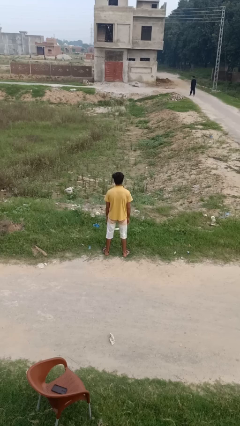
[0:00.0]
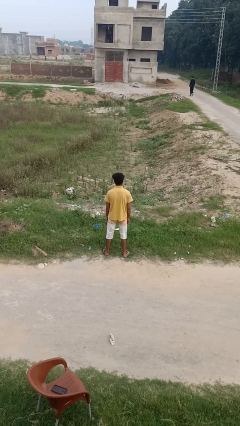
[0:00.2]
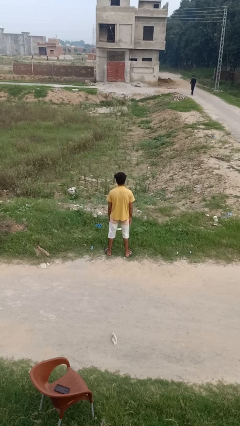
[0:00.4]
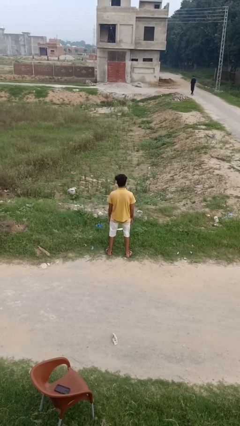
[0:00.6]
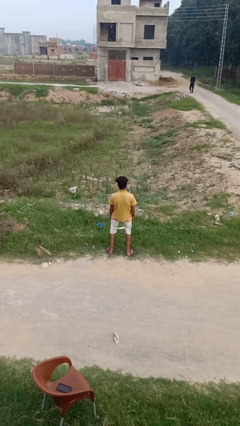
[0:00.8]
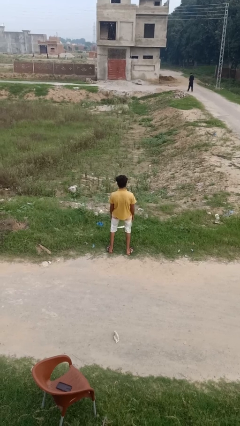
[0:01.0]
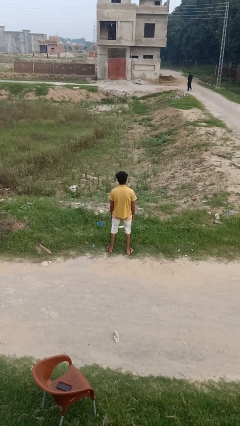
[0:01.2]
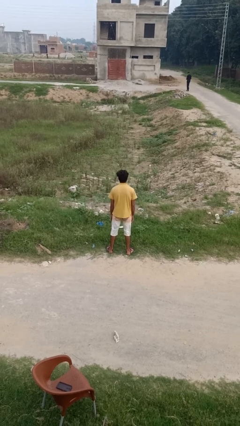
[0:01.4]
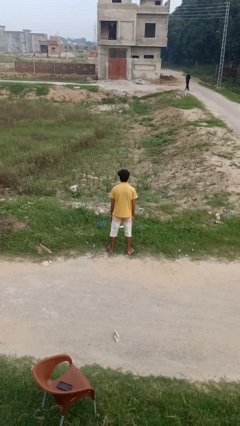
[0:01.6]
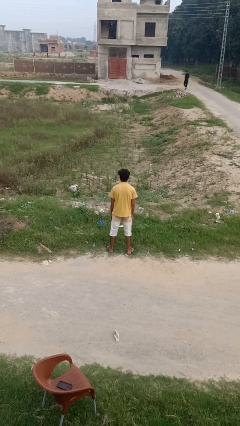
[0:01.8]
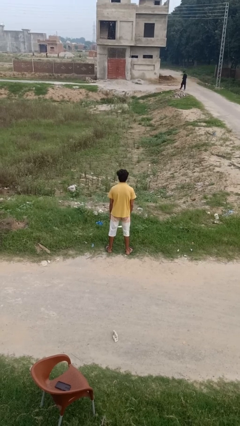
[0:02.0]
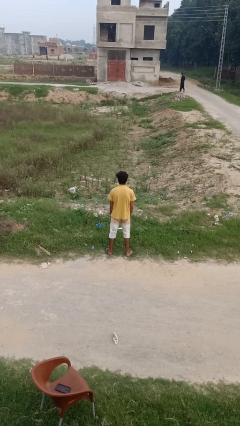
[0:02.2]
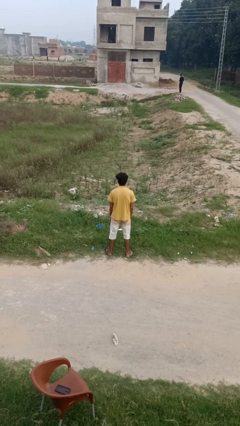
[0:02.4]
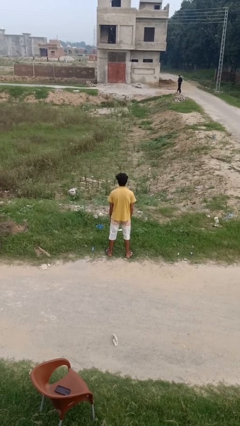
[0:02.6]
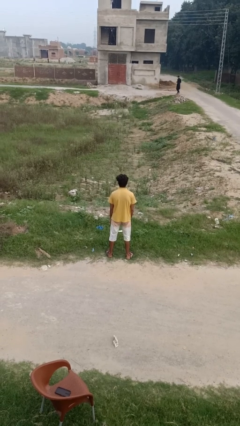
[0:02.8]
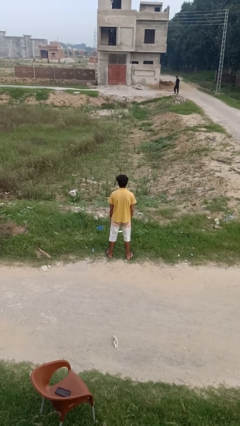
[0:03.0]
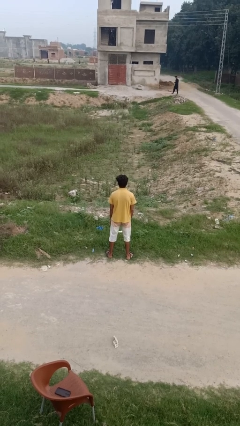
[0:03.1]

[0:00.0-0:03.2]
person wiggles hips

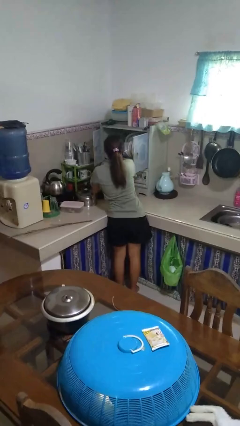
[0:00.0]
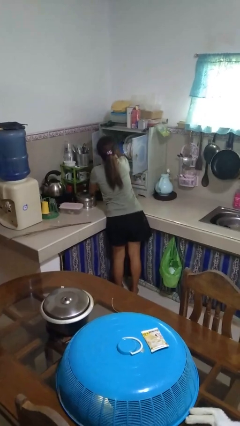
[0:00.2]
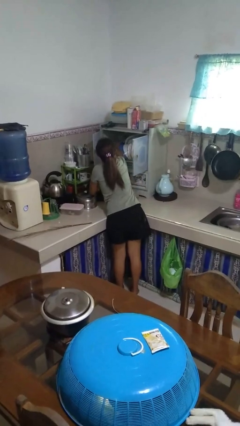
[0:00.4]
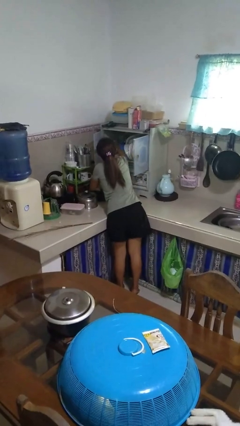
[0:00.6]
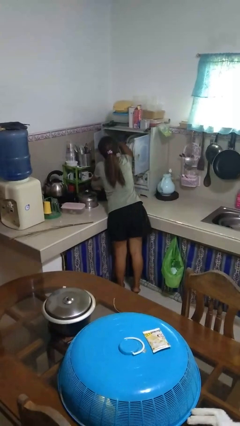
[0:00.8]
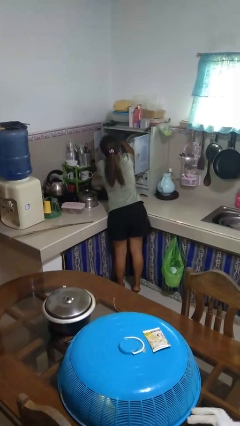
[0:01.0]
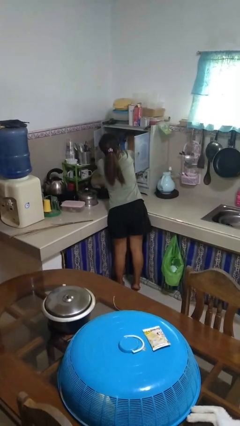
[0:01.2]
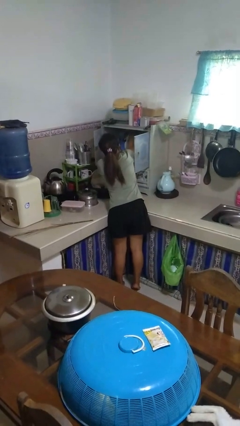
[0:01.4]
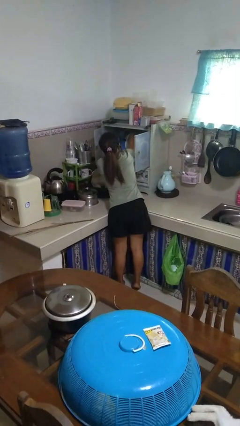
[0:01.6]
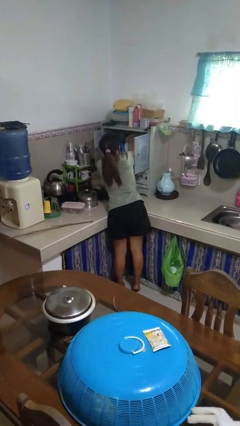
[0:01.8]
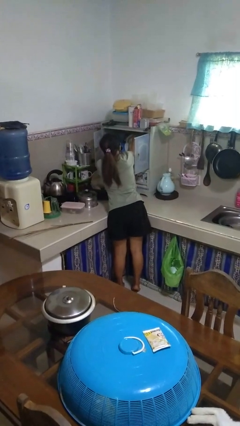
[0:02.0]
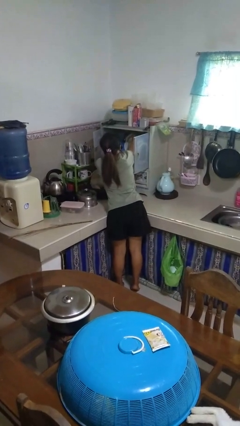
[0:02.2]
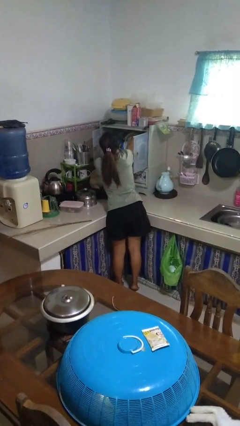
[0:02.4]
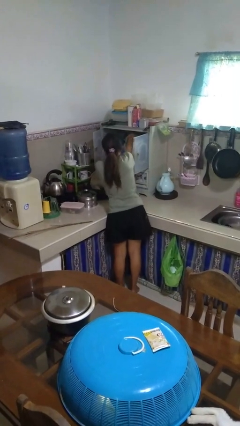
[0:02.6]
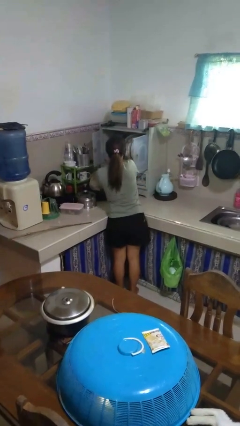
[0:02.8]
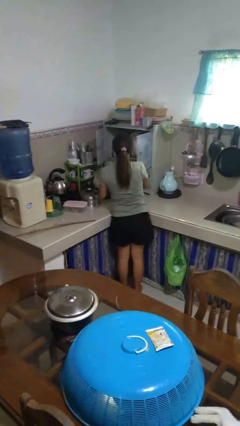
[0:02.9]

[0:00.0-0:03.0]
person searches in kitchen drawer

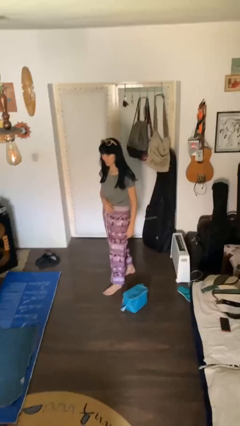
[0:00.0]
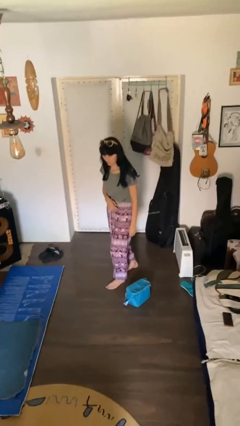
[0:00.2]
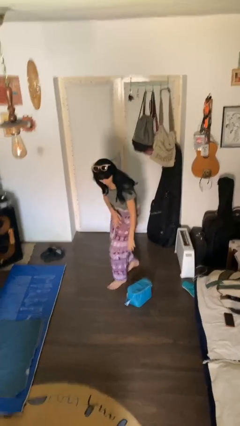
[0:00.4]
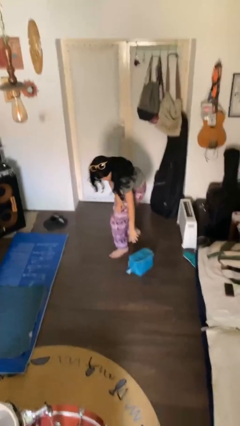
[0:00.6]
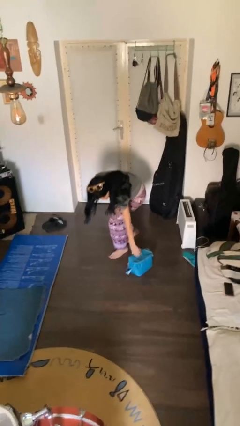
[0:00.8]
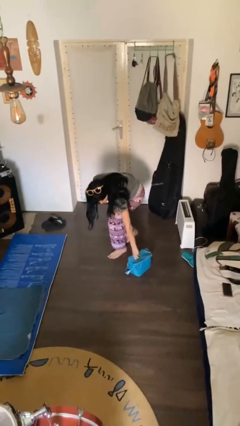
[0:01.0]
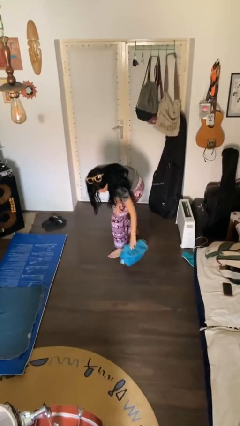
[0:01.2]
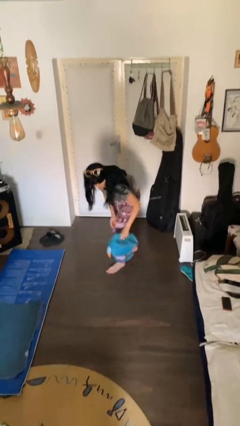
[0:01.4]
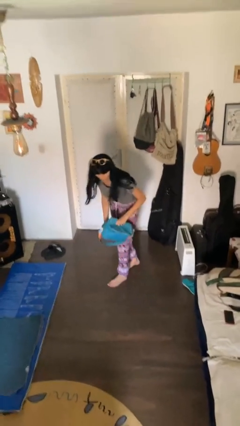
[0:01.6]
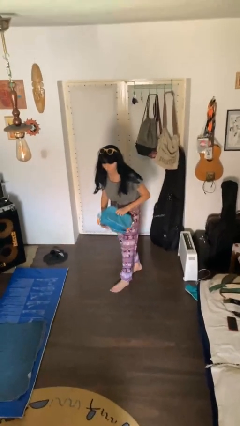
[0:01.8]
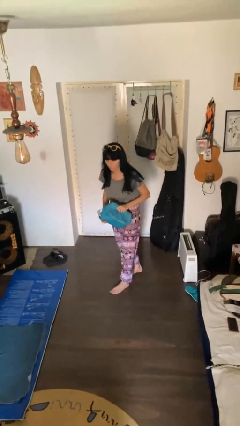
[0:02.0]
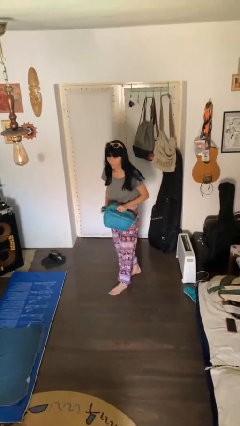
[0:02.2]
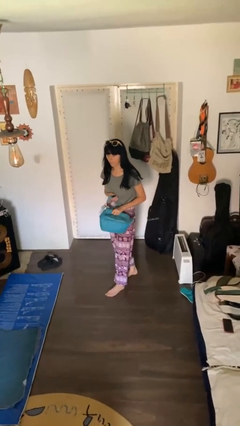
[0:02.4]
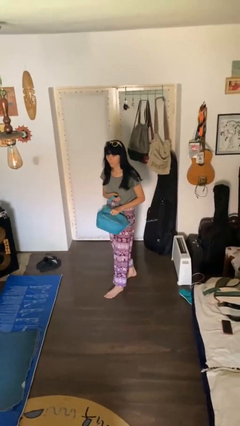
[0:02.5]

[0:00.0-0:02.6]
person picks up object from floor

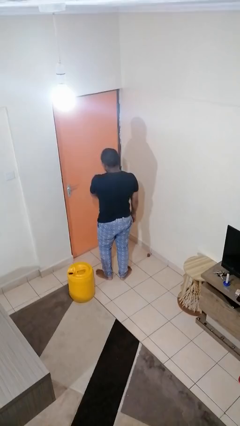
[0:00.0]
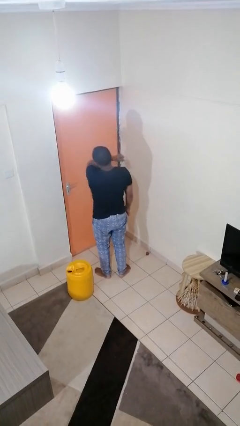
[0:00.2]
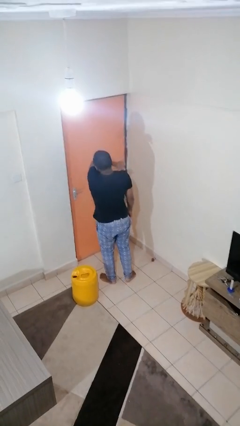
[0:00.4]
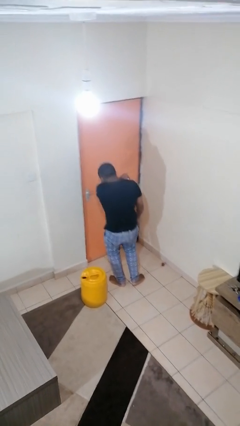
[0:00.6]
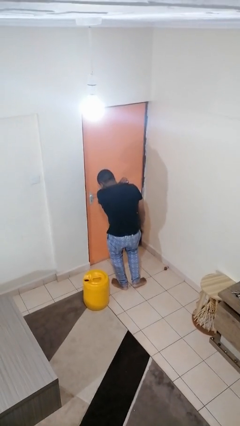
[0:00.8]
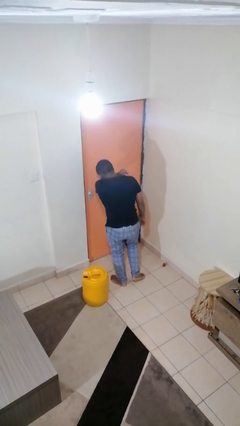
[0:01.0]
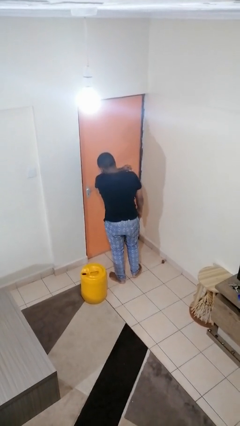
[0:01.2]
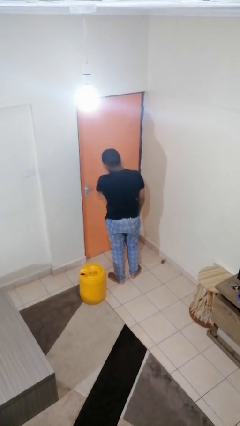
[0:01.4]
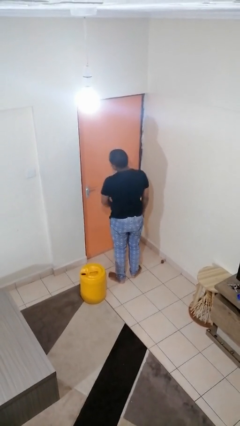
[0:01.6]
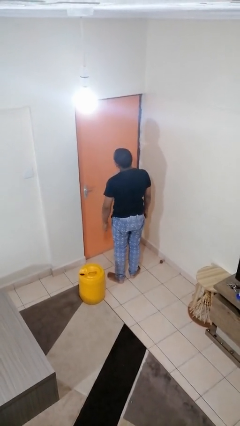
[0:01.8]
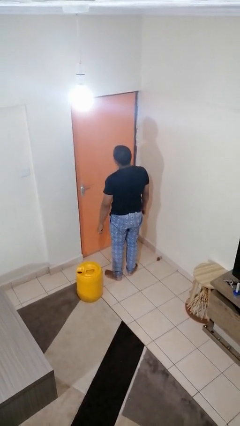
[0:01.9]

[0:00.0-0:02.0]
person sneezes into arm

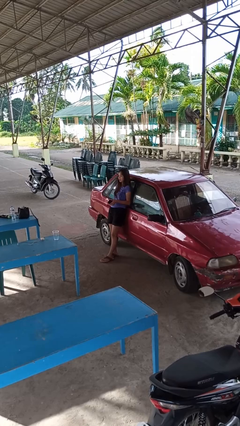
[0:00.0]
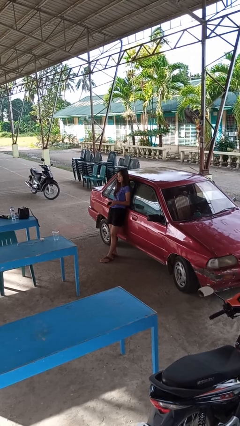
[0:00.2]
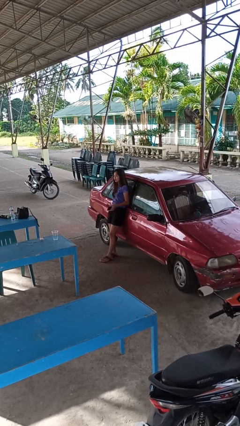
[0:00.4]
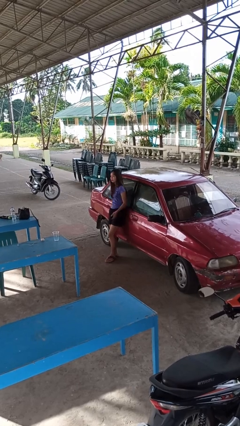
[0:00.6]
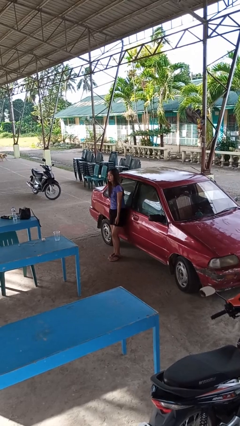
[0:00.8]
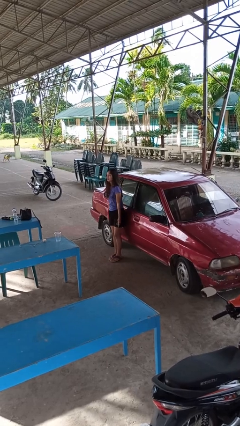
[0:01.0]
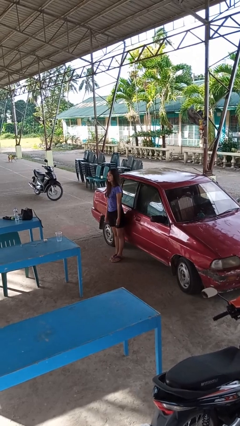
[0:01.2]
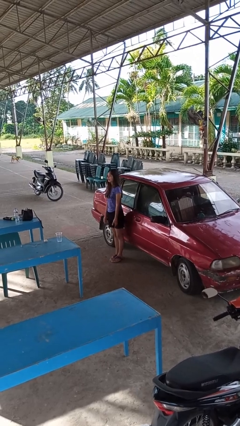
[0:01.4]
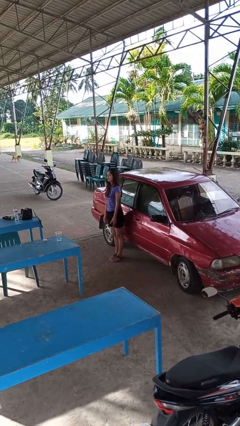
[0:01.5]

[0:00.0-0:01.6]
person leans against car

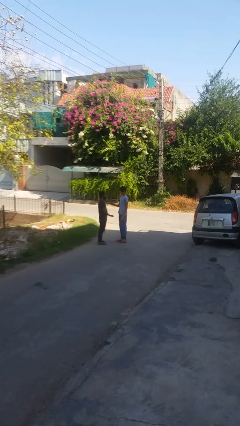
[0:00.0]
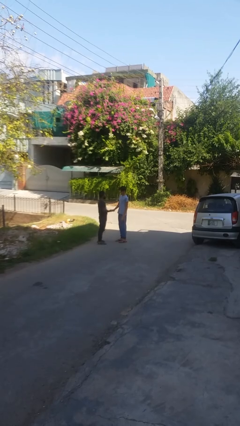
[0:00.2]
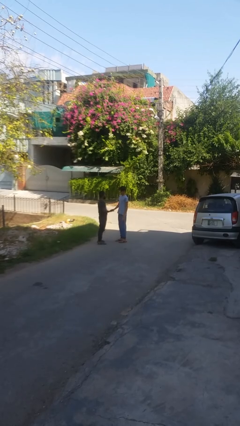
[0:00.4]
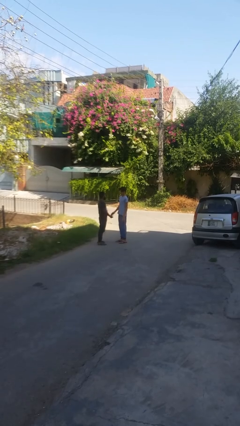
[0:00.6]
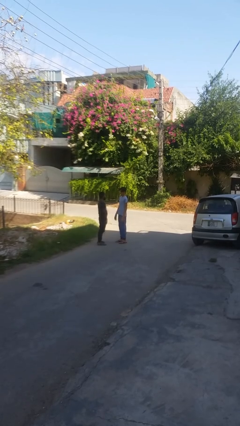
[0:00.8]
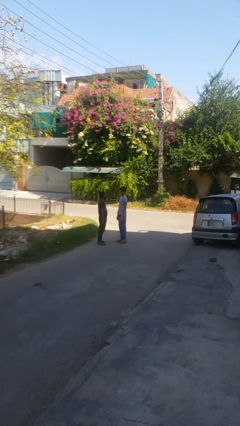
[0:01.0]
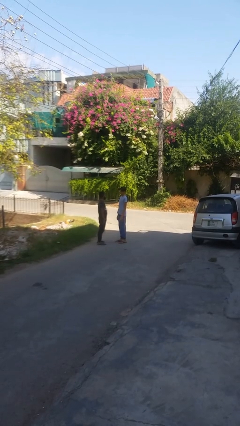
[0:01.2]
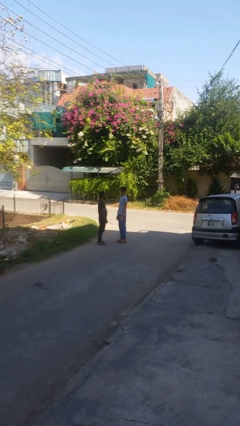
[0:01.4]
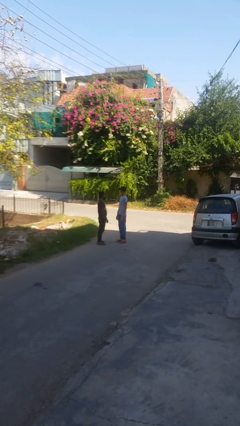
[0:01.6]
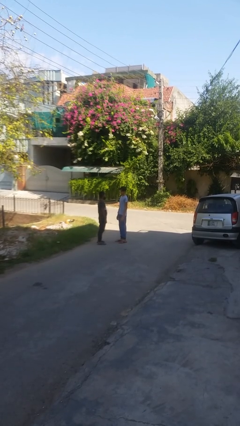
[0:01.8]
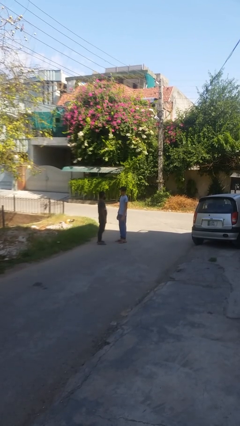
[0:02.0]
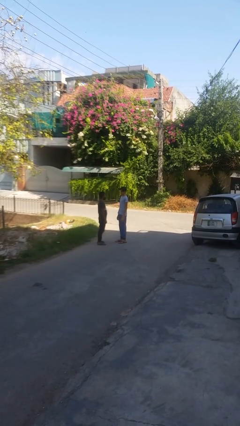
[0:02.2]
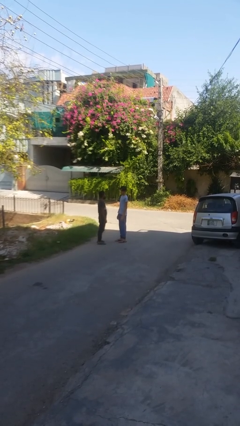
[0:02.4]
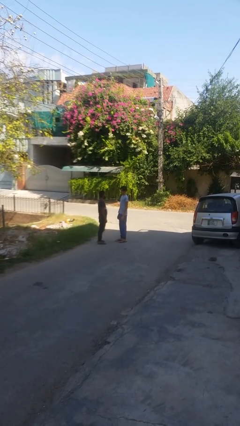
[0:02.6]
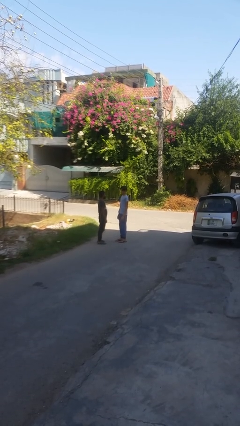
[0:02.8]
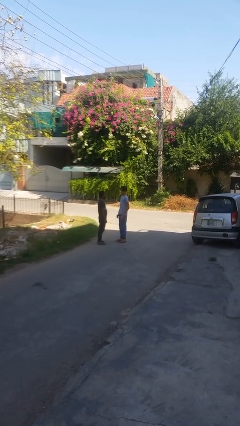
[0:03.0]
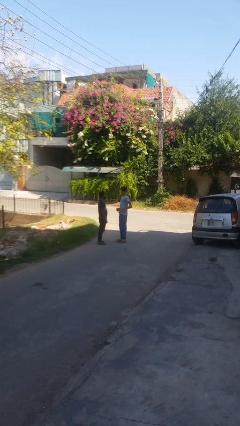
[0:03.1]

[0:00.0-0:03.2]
person highfives hand

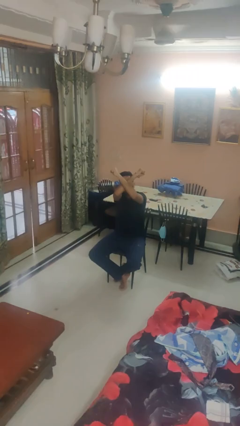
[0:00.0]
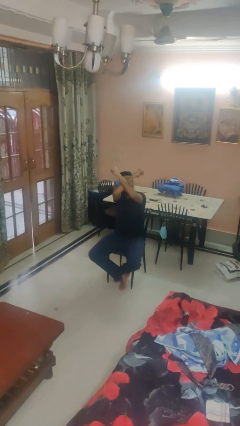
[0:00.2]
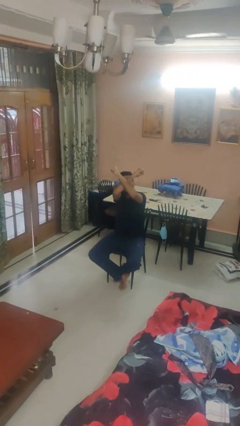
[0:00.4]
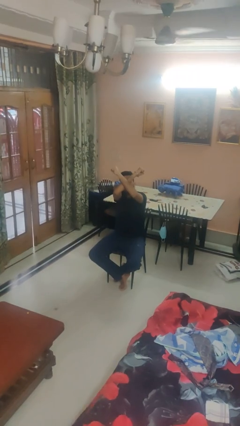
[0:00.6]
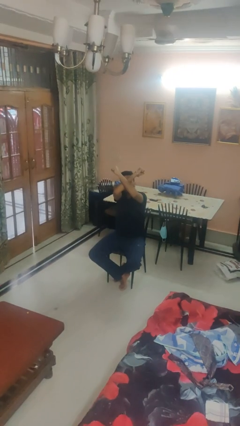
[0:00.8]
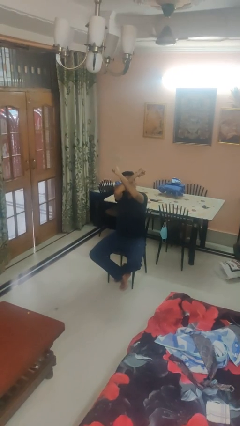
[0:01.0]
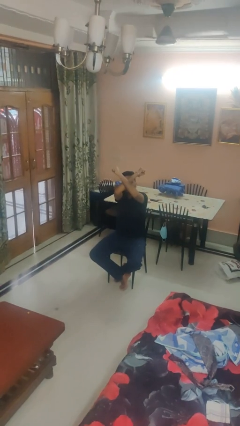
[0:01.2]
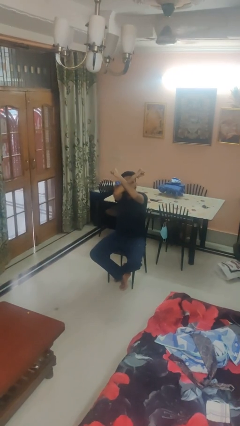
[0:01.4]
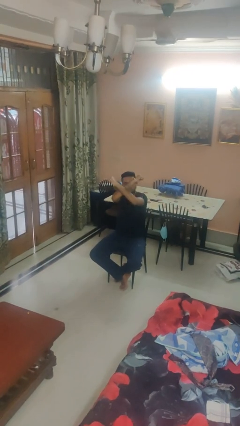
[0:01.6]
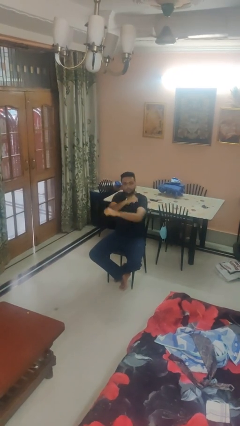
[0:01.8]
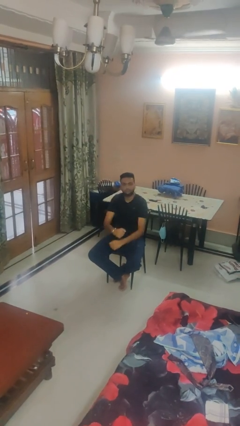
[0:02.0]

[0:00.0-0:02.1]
person gestures arms x
